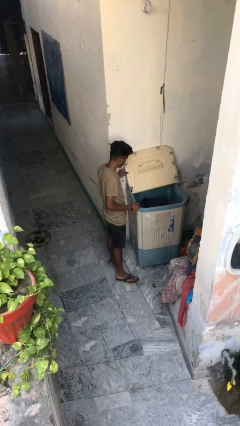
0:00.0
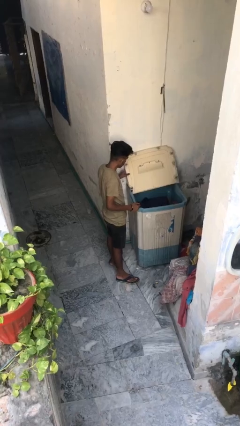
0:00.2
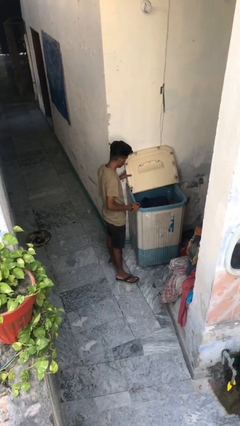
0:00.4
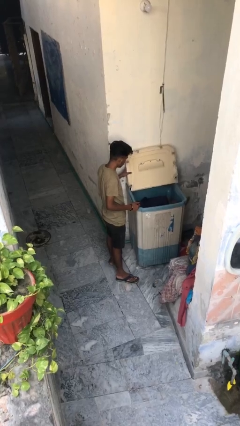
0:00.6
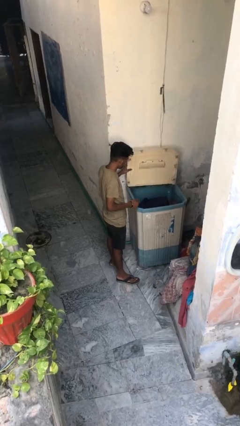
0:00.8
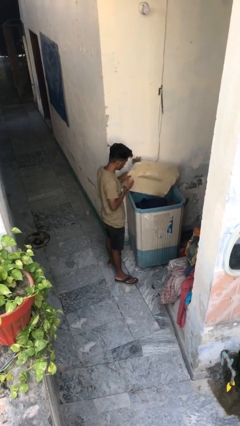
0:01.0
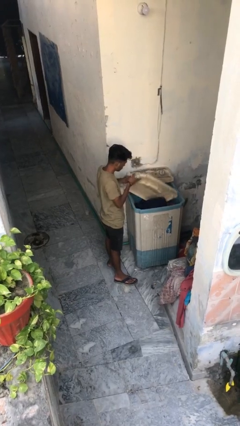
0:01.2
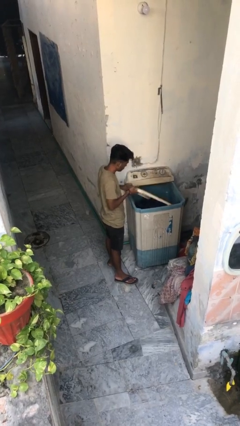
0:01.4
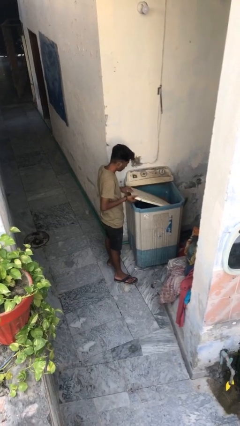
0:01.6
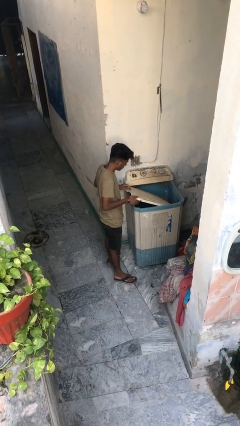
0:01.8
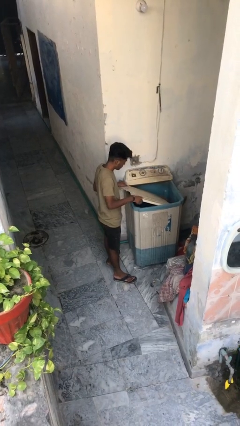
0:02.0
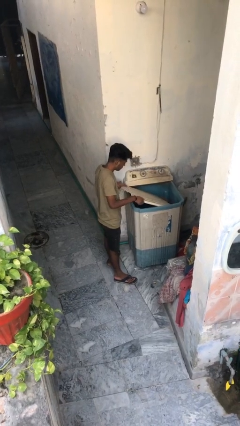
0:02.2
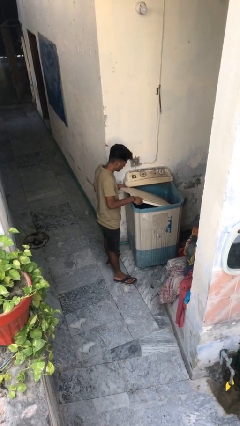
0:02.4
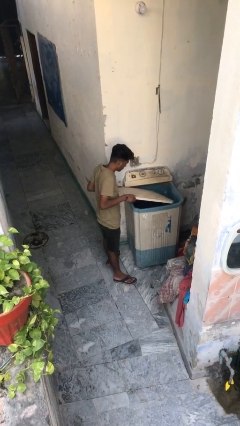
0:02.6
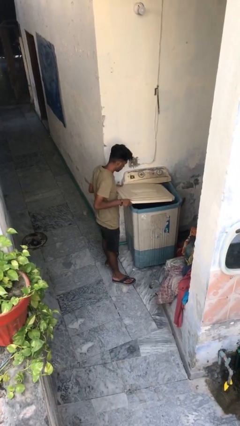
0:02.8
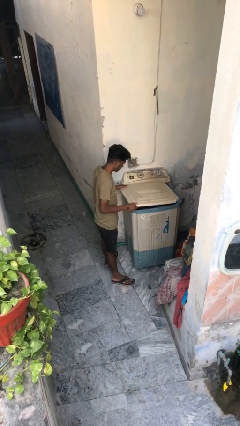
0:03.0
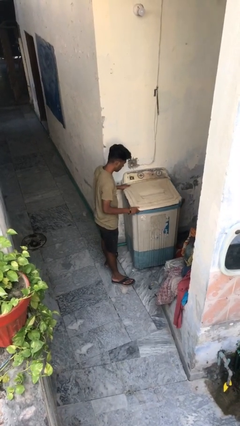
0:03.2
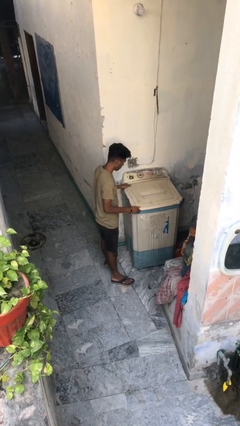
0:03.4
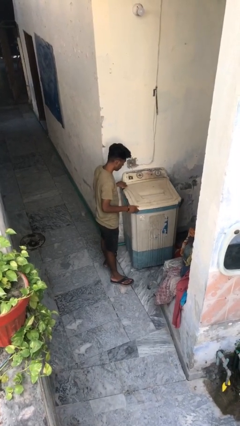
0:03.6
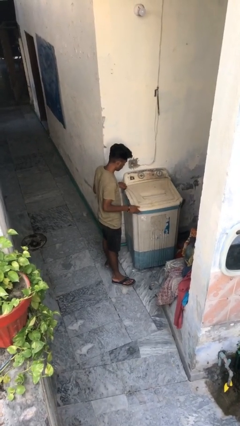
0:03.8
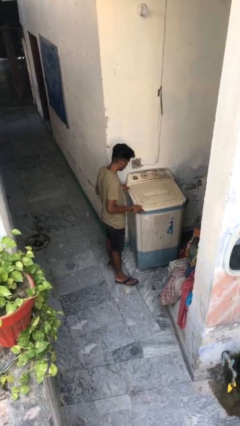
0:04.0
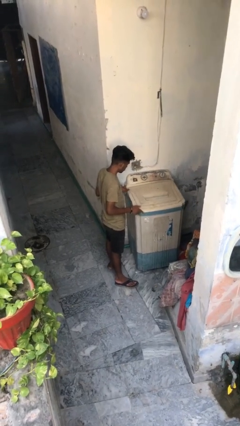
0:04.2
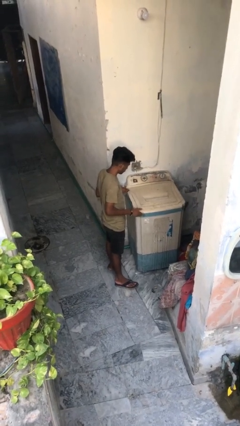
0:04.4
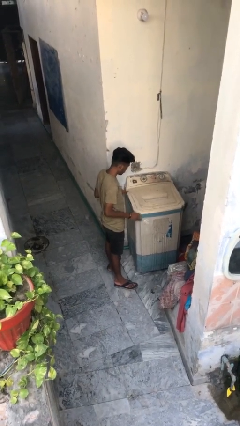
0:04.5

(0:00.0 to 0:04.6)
person closes clothes washer

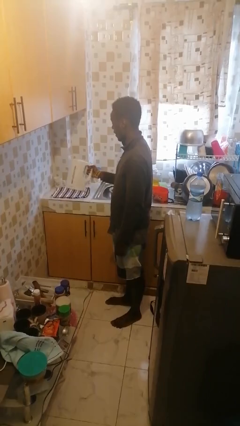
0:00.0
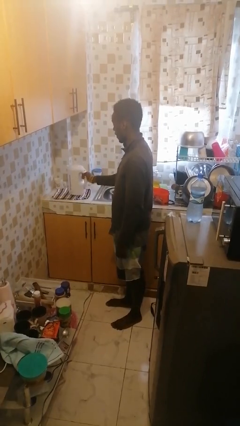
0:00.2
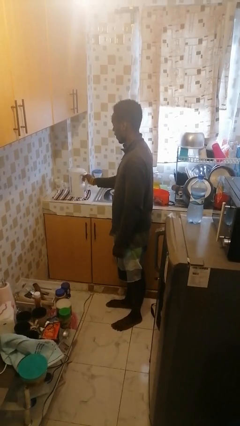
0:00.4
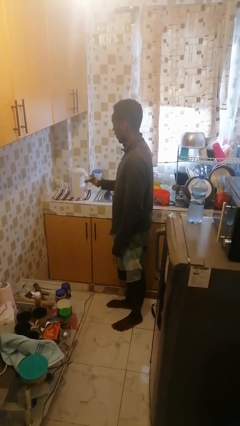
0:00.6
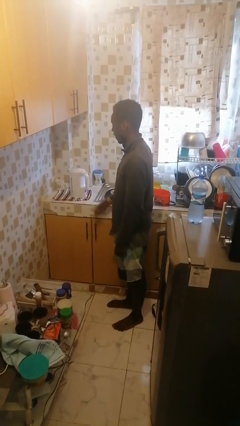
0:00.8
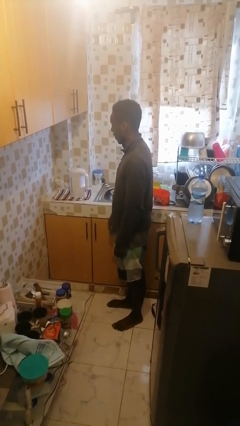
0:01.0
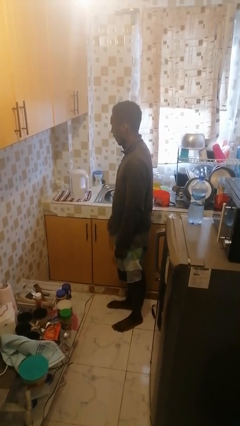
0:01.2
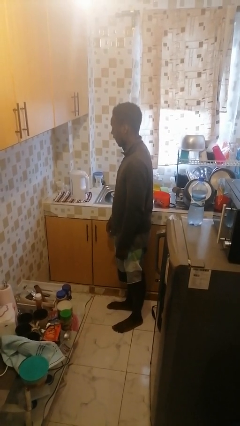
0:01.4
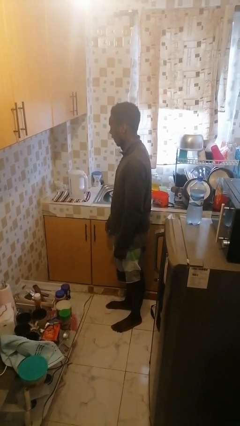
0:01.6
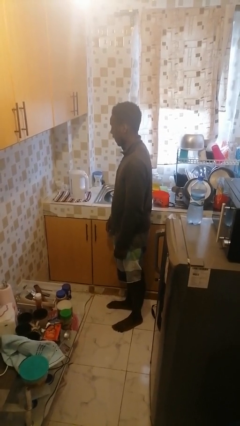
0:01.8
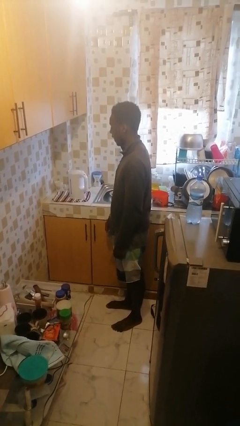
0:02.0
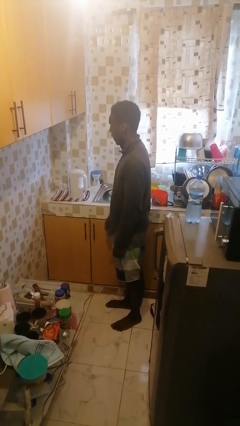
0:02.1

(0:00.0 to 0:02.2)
person puts down object on countertop

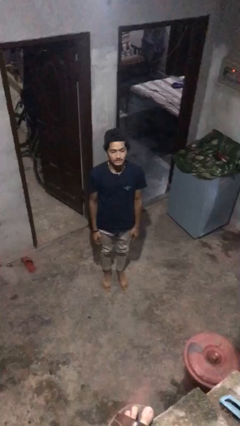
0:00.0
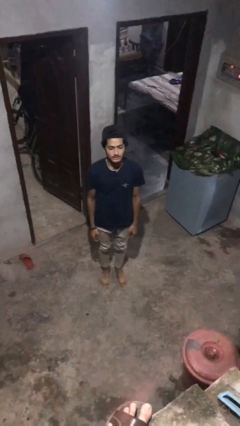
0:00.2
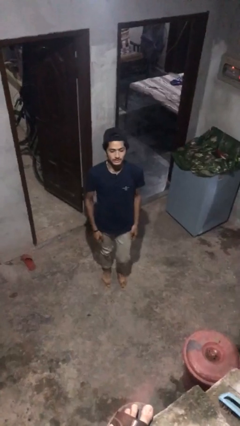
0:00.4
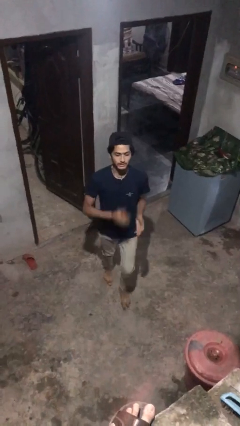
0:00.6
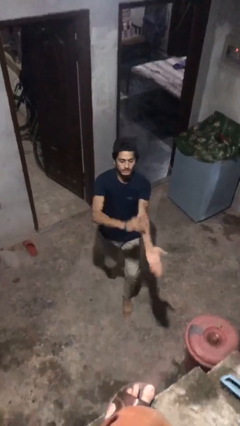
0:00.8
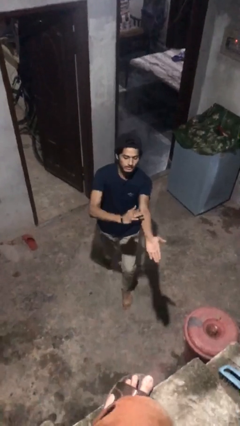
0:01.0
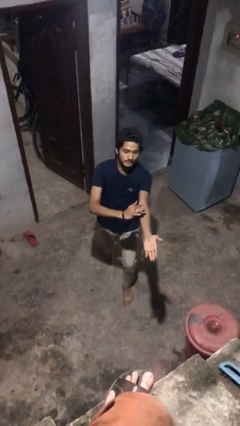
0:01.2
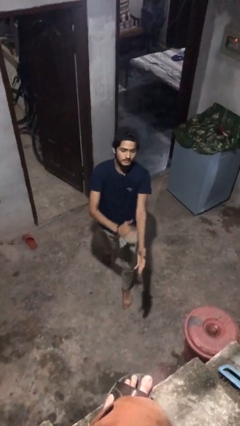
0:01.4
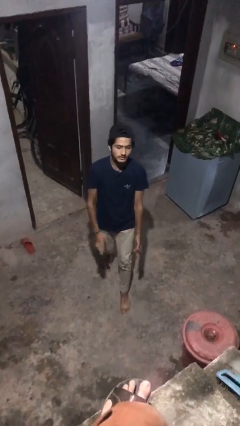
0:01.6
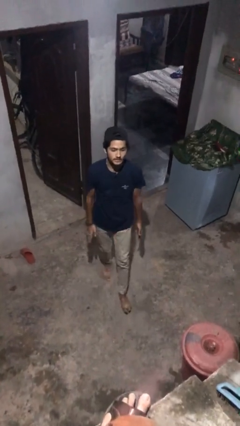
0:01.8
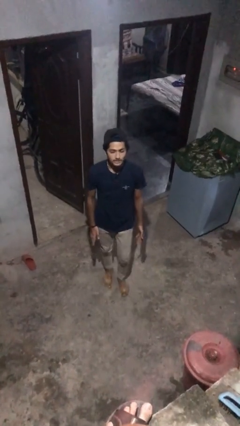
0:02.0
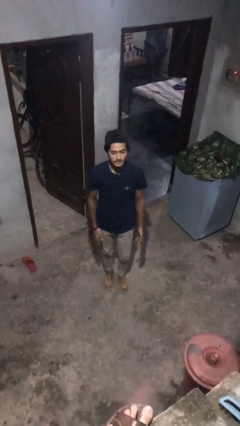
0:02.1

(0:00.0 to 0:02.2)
person karate chop

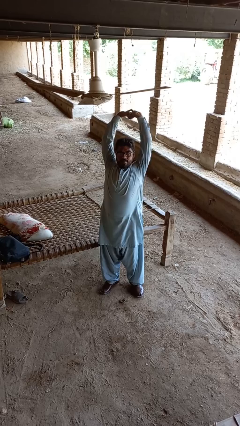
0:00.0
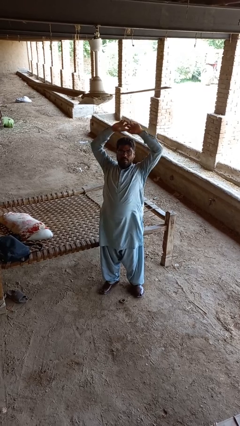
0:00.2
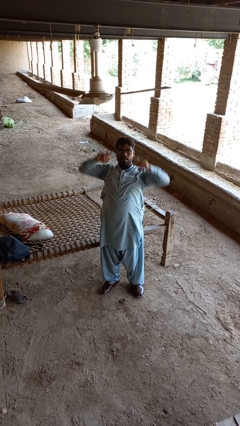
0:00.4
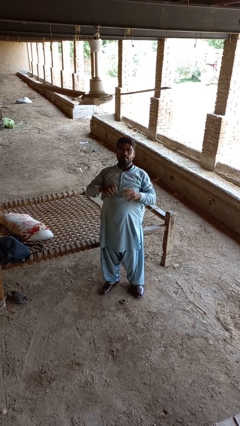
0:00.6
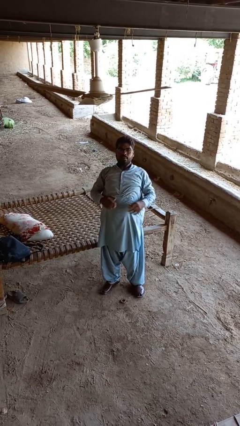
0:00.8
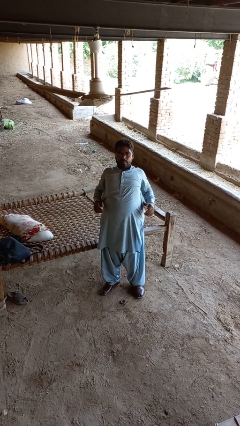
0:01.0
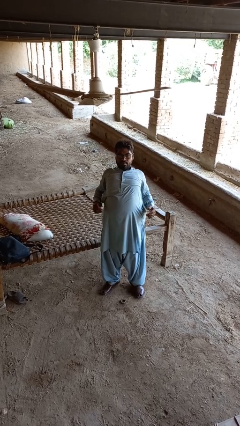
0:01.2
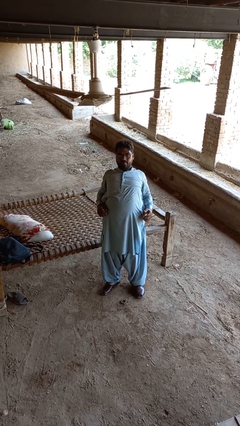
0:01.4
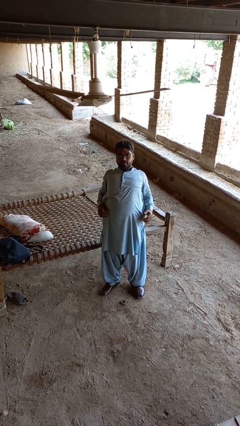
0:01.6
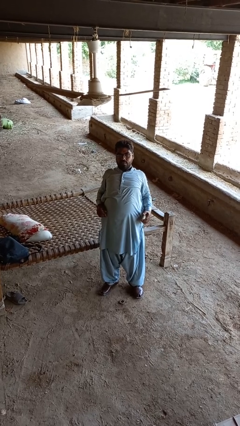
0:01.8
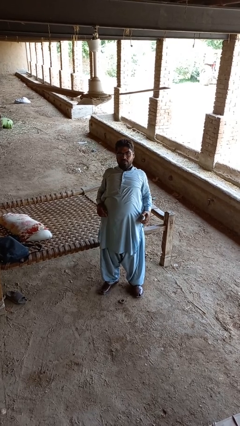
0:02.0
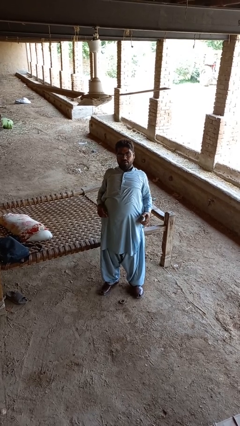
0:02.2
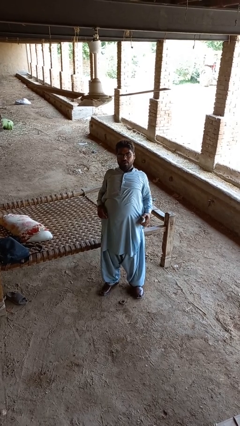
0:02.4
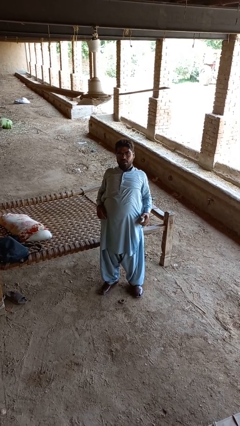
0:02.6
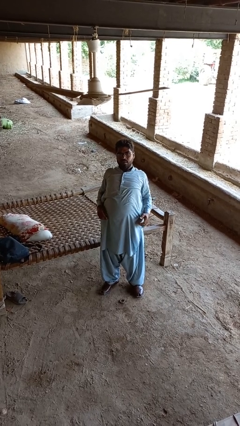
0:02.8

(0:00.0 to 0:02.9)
person stretches back

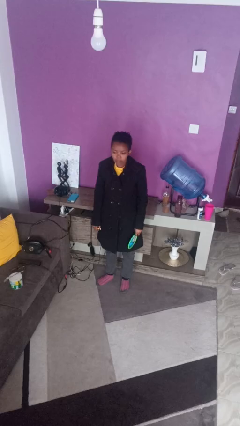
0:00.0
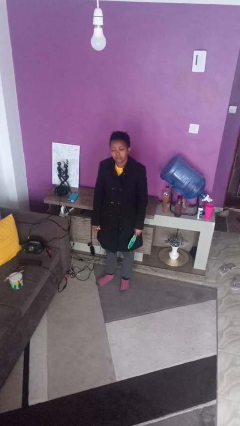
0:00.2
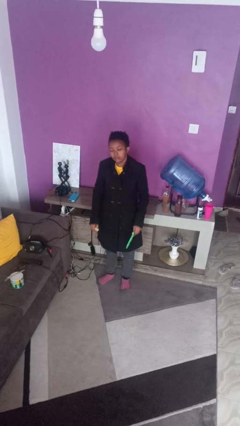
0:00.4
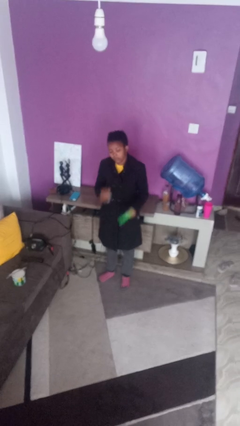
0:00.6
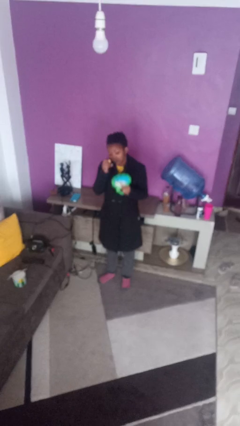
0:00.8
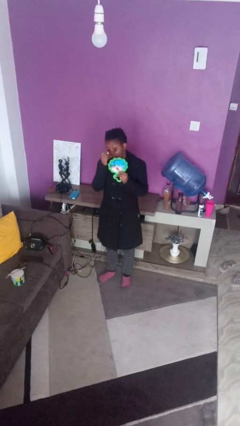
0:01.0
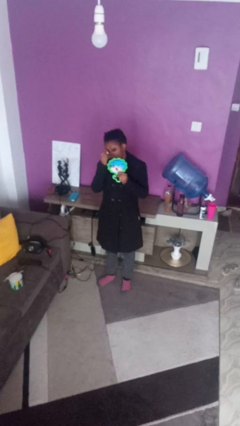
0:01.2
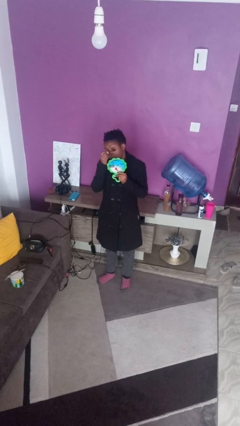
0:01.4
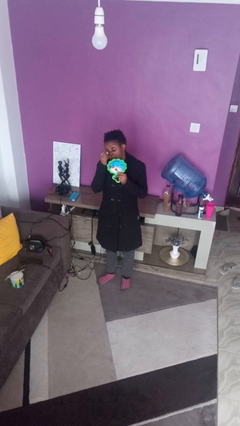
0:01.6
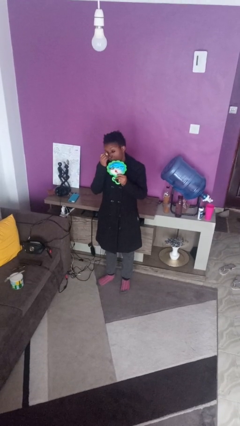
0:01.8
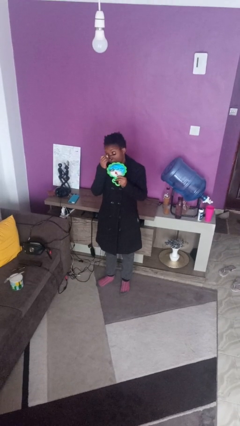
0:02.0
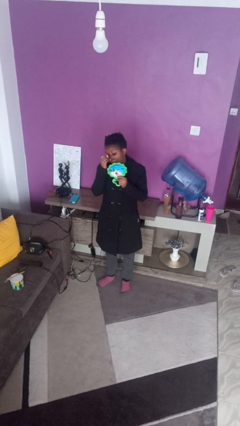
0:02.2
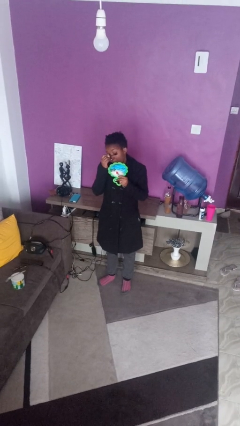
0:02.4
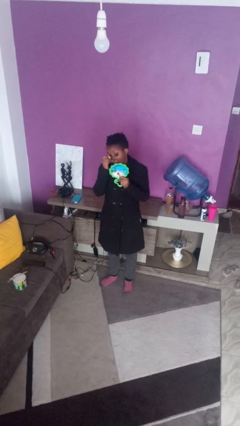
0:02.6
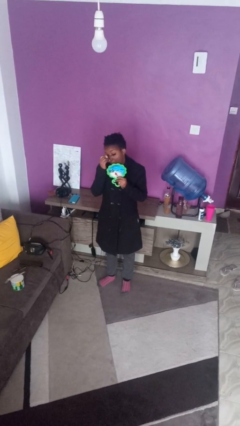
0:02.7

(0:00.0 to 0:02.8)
person applies eye makeup

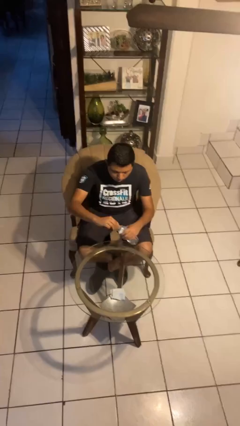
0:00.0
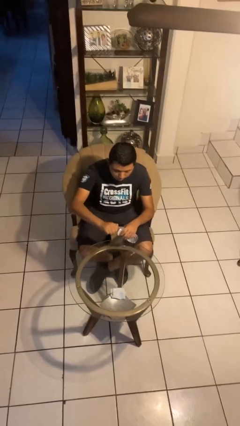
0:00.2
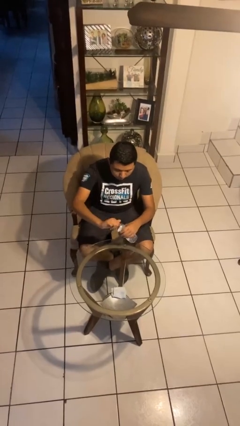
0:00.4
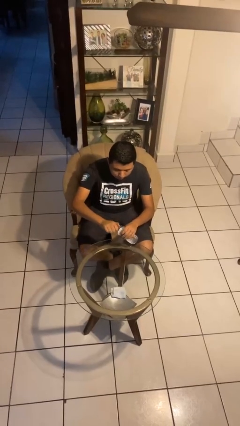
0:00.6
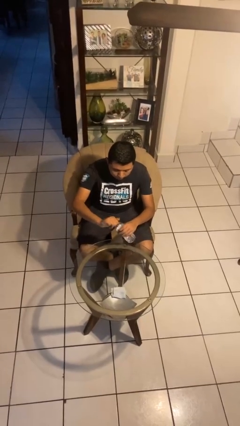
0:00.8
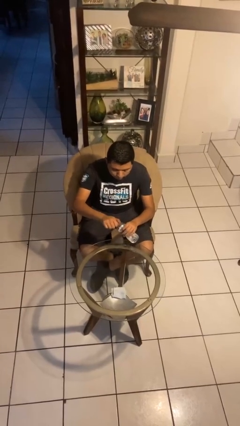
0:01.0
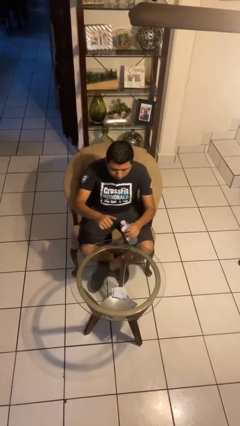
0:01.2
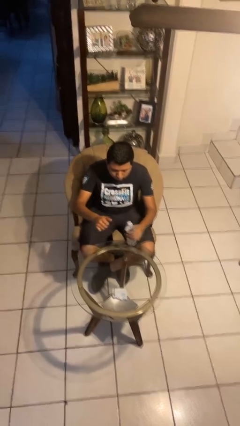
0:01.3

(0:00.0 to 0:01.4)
person screws lid to bottle

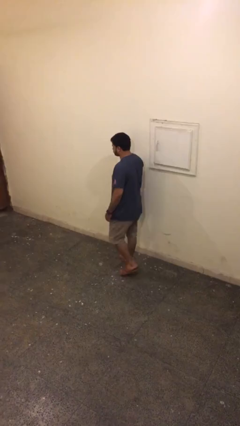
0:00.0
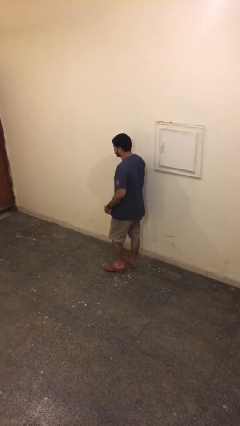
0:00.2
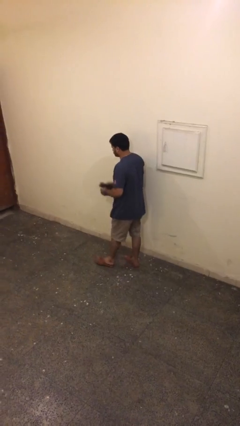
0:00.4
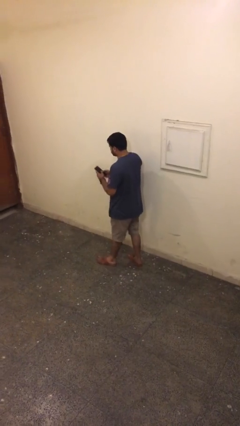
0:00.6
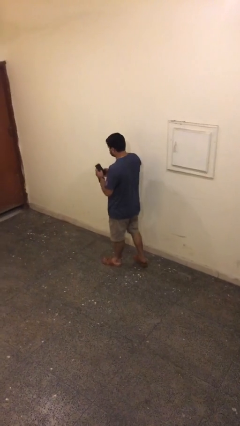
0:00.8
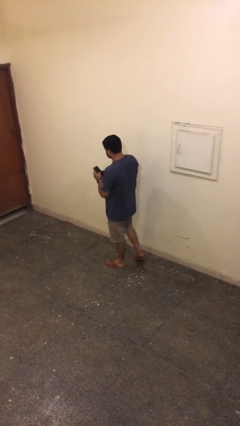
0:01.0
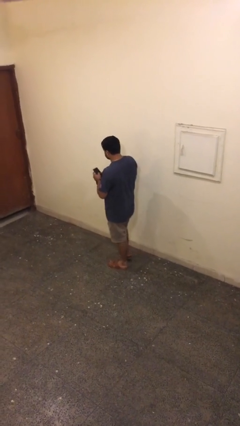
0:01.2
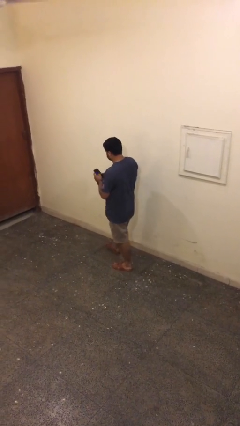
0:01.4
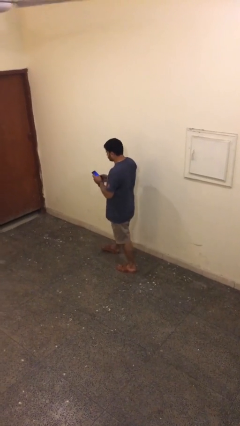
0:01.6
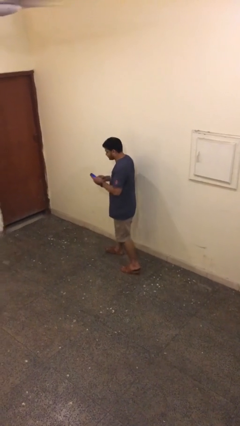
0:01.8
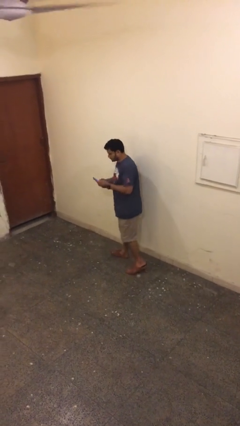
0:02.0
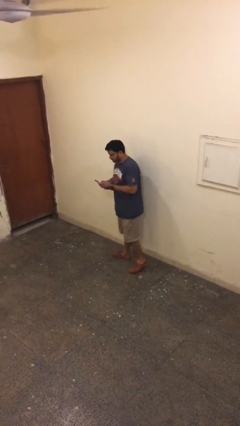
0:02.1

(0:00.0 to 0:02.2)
person texts on phone
